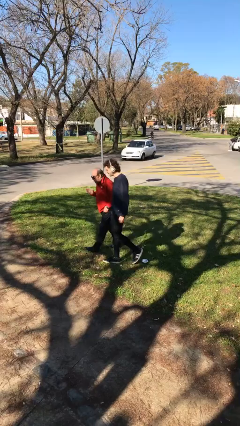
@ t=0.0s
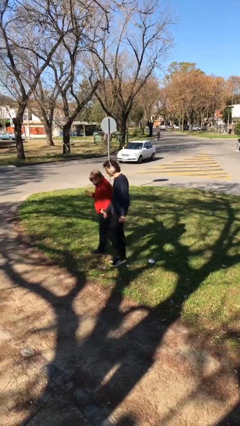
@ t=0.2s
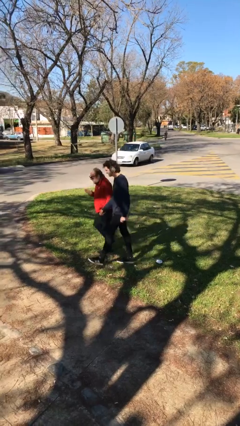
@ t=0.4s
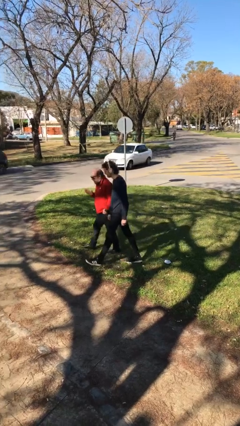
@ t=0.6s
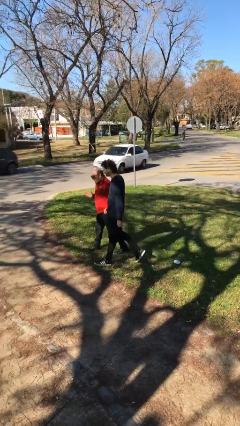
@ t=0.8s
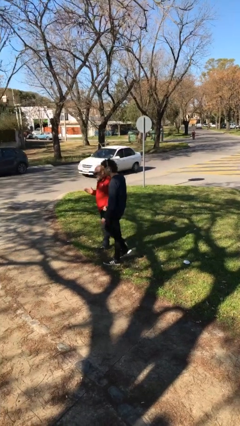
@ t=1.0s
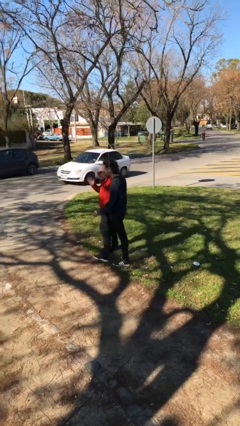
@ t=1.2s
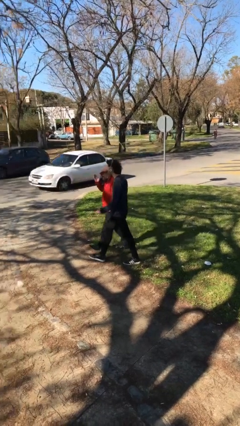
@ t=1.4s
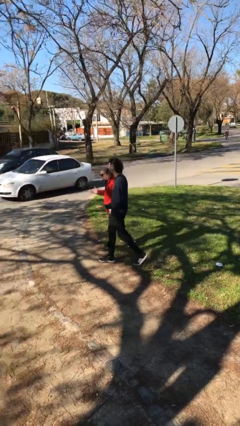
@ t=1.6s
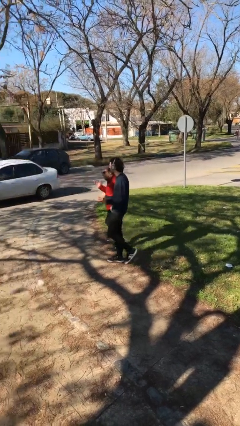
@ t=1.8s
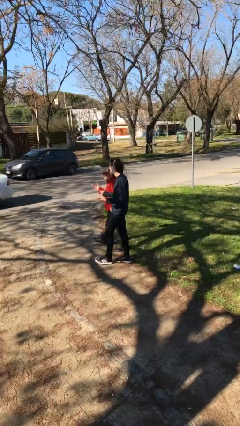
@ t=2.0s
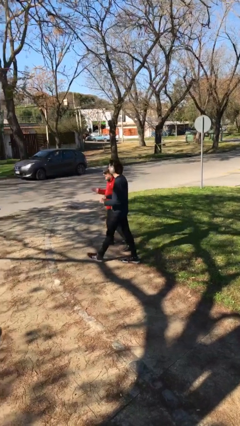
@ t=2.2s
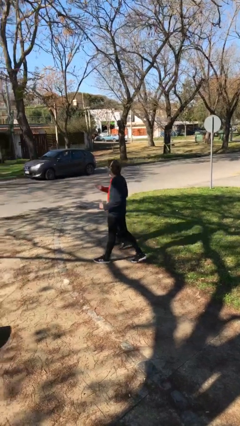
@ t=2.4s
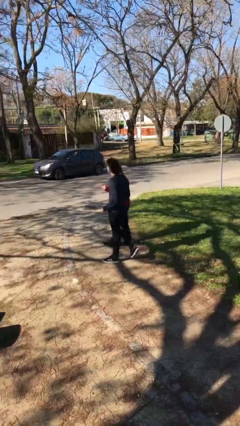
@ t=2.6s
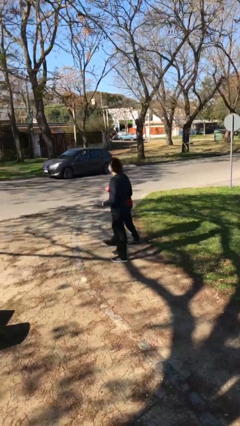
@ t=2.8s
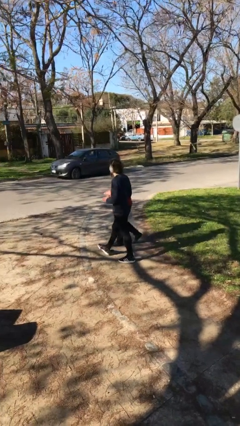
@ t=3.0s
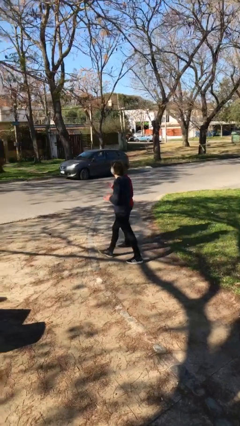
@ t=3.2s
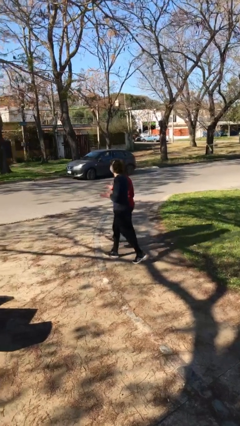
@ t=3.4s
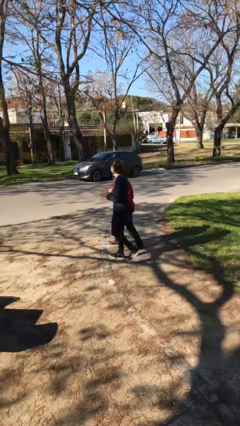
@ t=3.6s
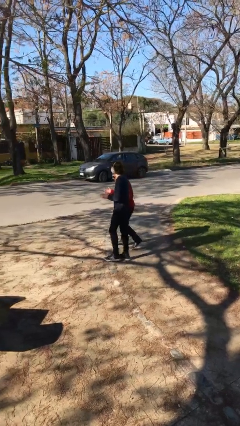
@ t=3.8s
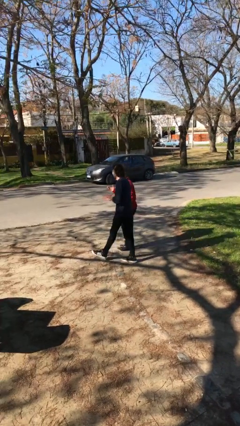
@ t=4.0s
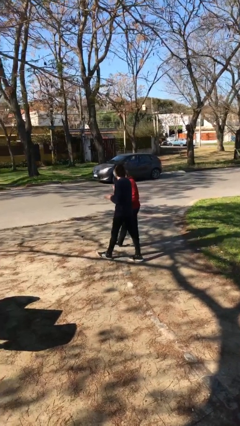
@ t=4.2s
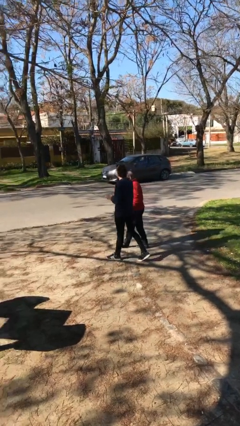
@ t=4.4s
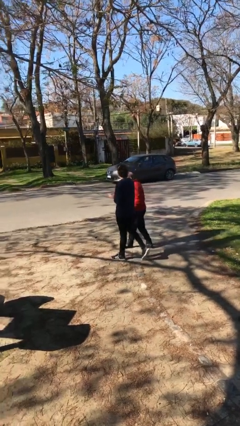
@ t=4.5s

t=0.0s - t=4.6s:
person talks to person

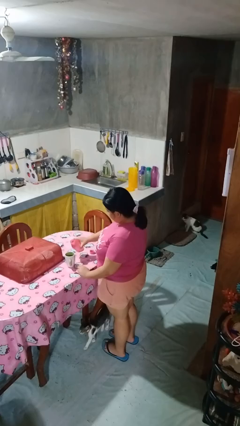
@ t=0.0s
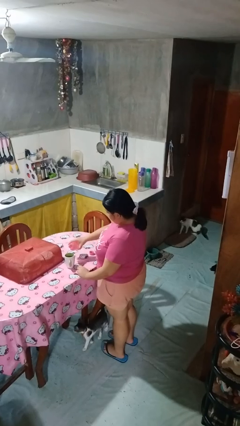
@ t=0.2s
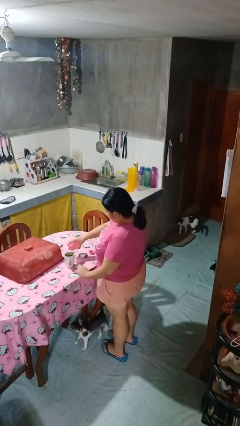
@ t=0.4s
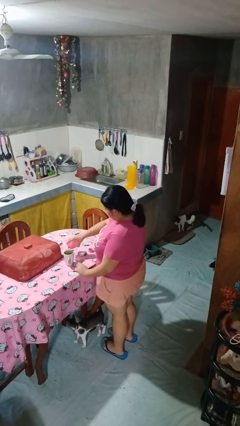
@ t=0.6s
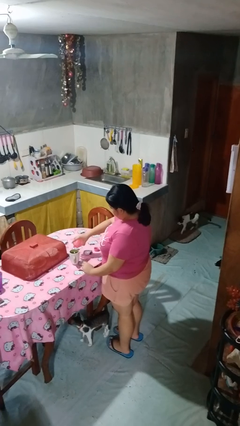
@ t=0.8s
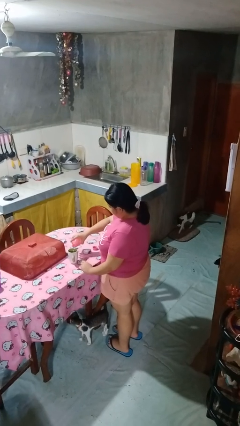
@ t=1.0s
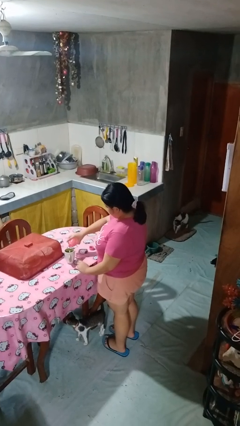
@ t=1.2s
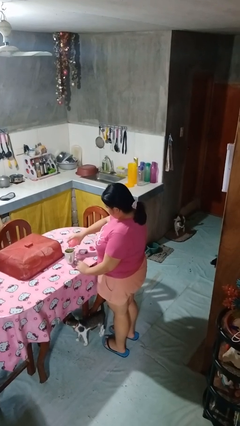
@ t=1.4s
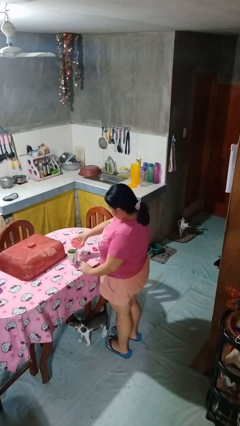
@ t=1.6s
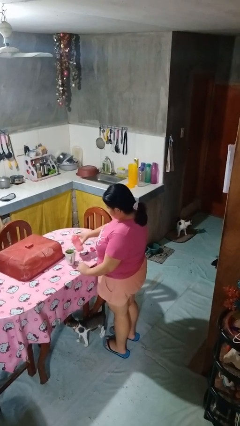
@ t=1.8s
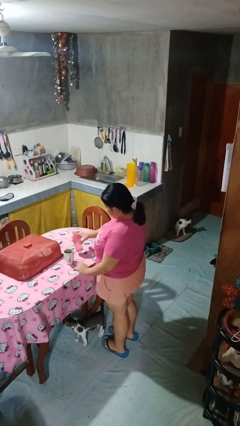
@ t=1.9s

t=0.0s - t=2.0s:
person pours liquid into cup

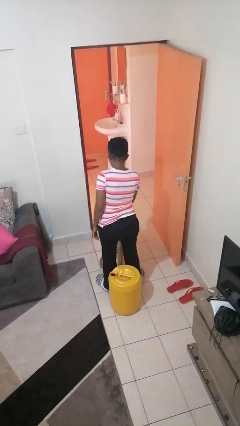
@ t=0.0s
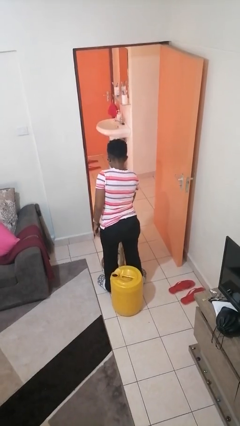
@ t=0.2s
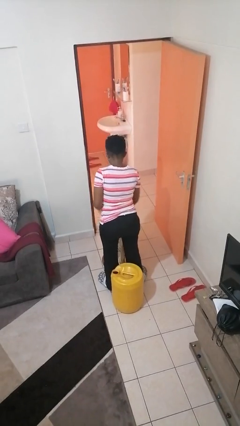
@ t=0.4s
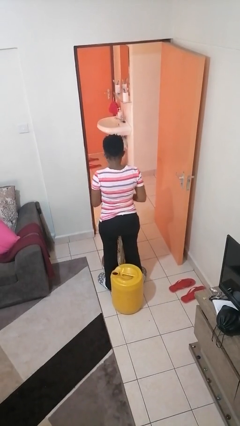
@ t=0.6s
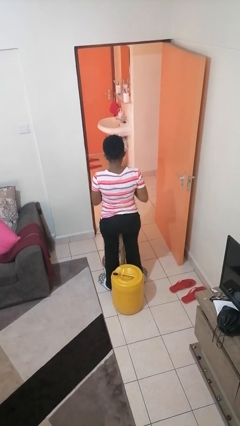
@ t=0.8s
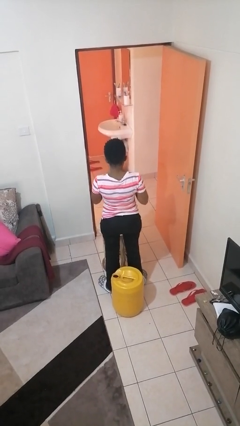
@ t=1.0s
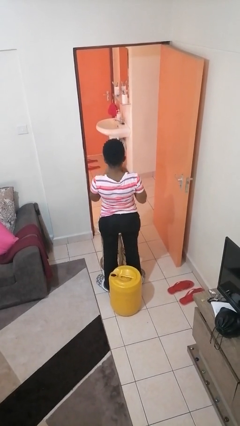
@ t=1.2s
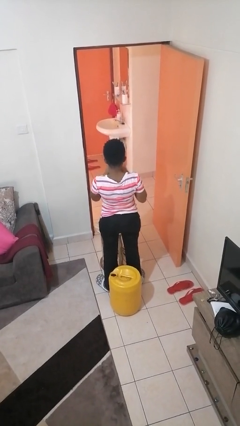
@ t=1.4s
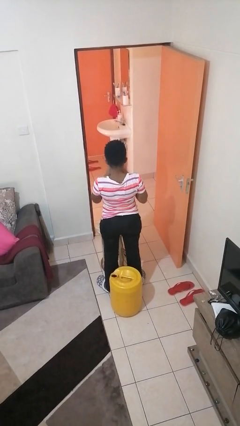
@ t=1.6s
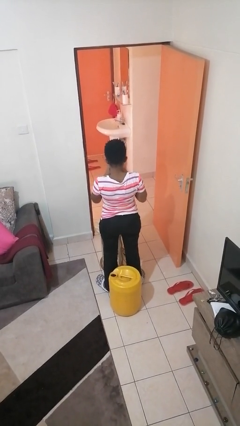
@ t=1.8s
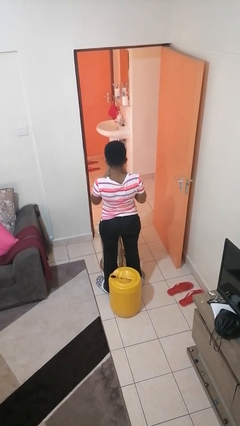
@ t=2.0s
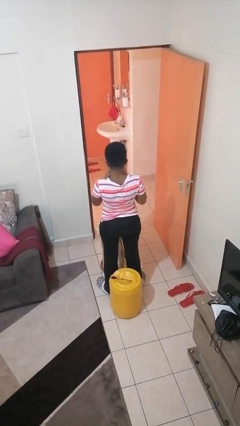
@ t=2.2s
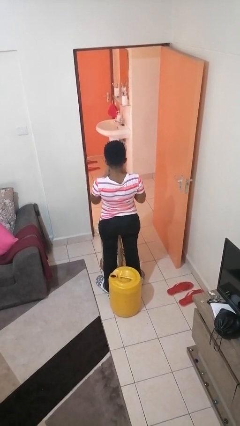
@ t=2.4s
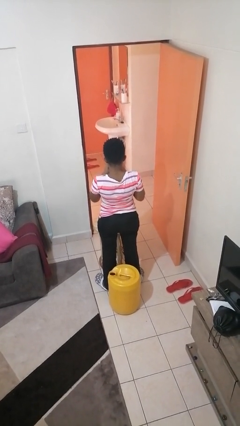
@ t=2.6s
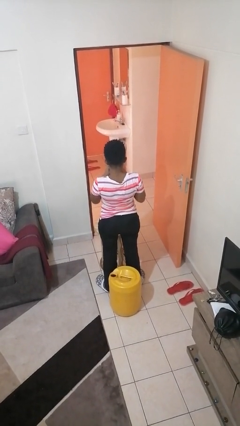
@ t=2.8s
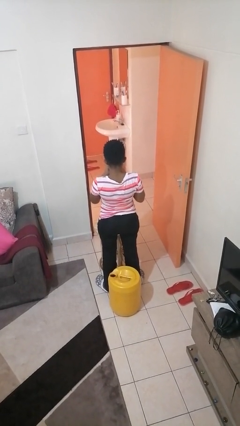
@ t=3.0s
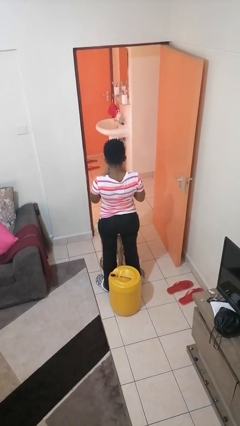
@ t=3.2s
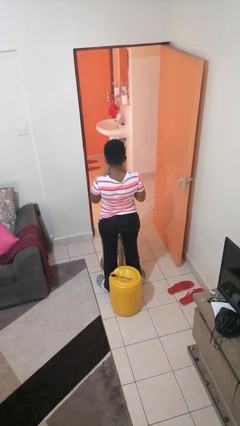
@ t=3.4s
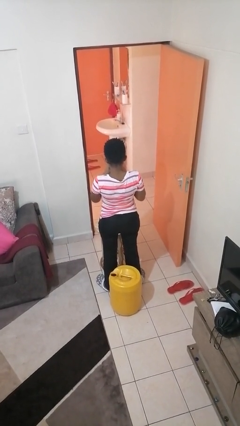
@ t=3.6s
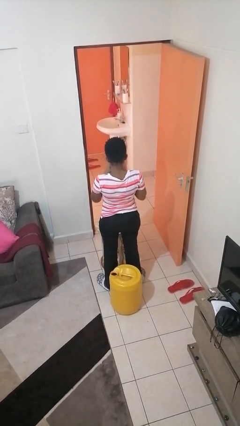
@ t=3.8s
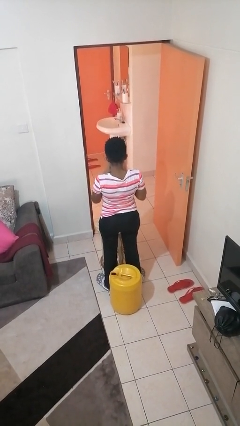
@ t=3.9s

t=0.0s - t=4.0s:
person drinks from straw

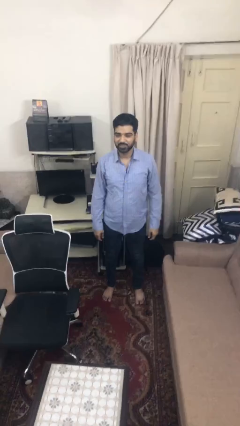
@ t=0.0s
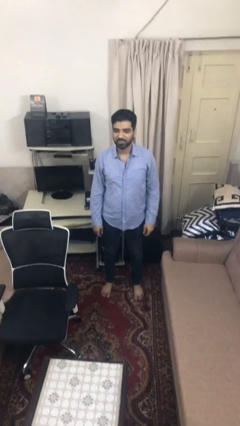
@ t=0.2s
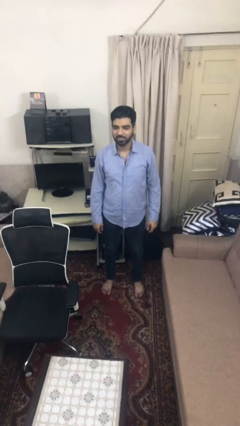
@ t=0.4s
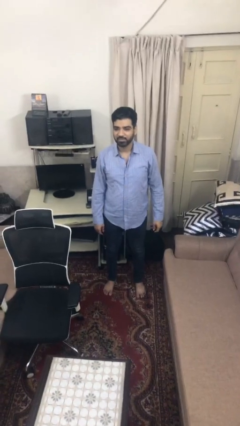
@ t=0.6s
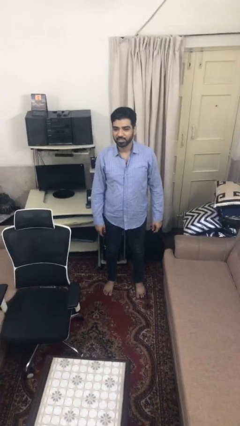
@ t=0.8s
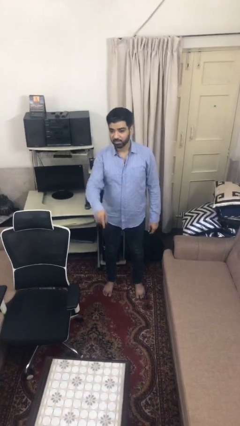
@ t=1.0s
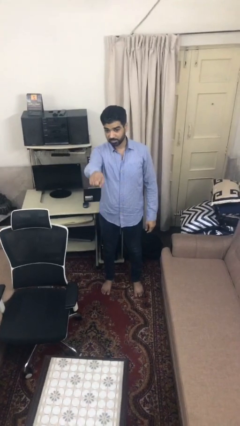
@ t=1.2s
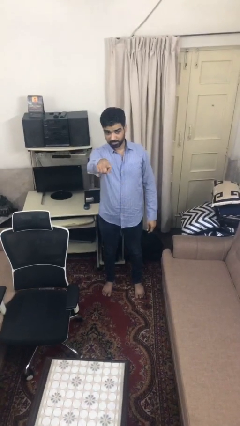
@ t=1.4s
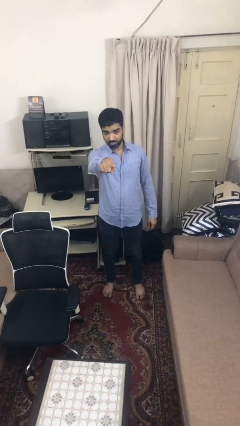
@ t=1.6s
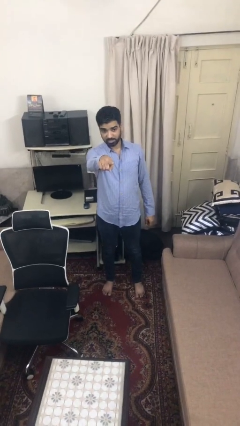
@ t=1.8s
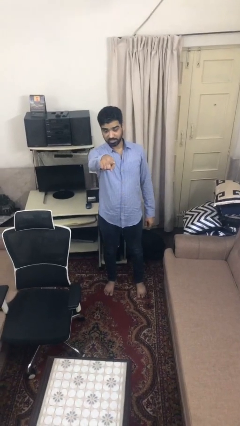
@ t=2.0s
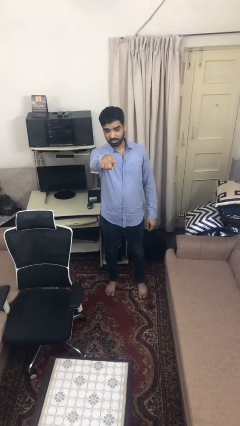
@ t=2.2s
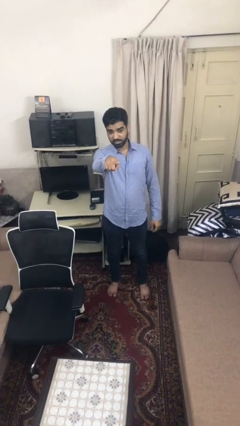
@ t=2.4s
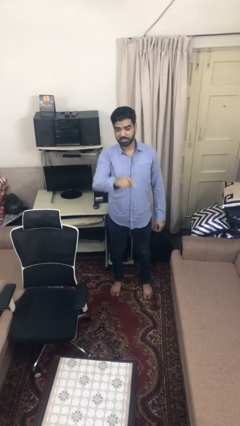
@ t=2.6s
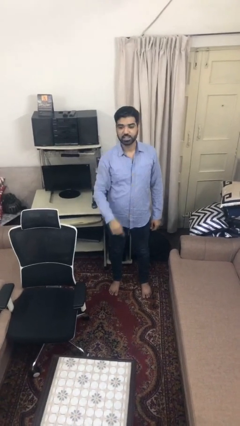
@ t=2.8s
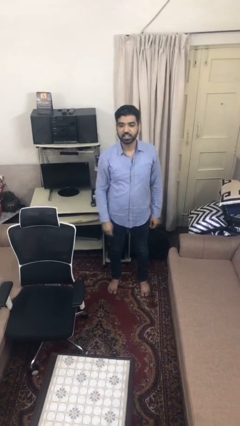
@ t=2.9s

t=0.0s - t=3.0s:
person points at person

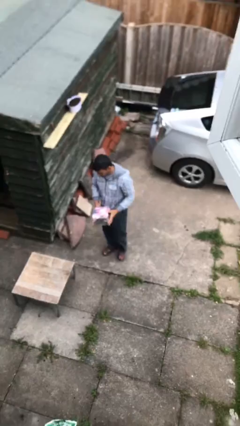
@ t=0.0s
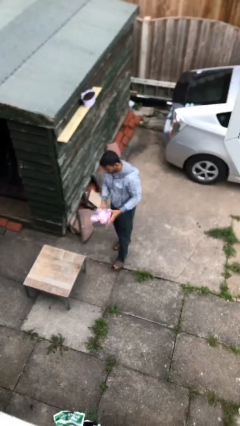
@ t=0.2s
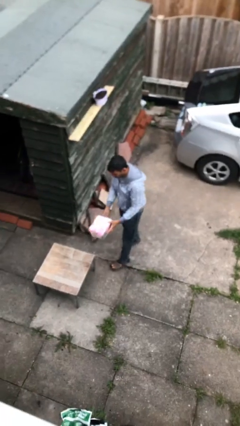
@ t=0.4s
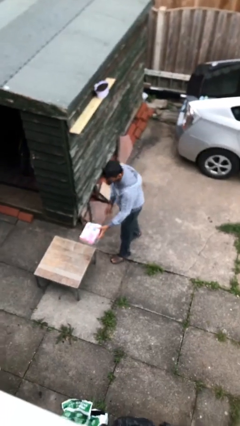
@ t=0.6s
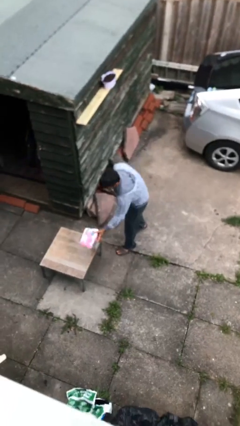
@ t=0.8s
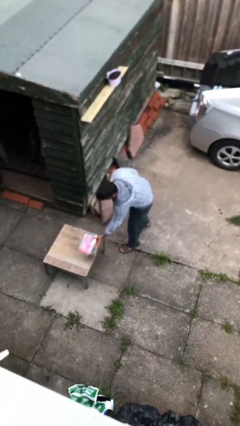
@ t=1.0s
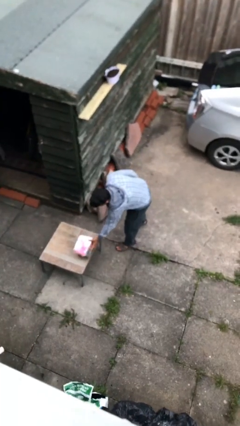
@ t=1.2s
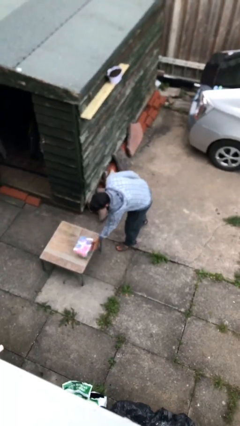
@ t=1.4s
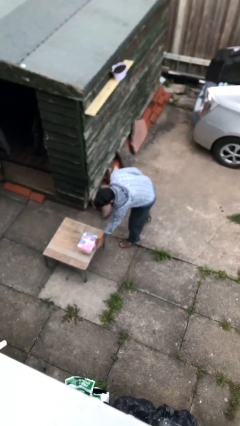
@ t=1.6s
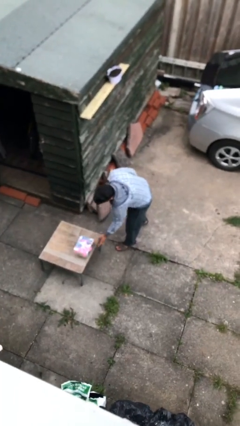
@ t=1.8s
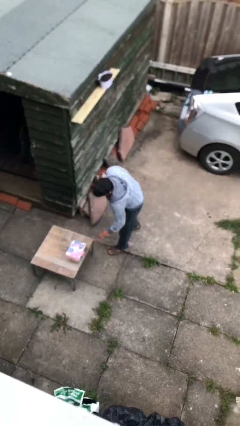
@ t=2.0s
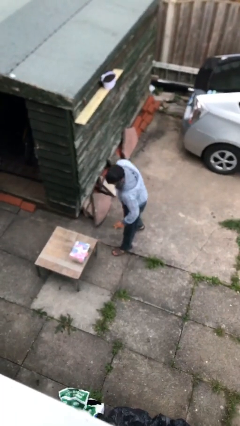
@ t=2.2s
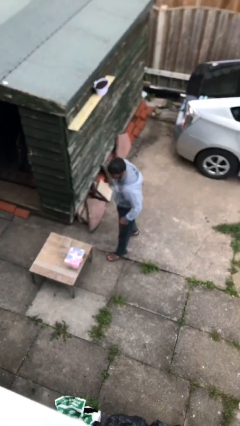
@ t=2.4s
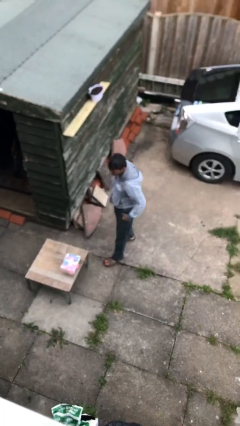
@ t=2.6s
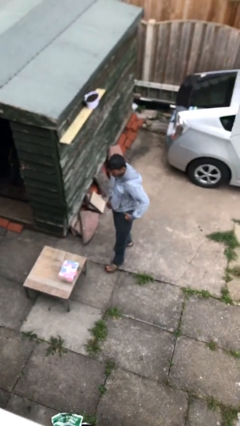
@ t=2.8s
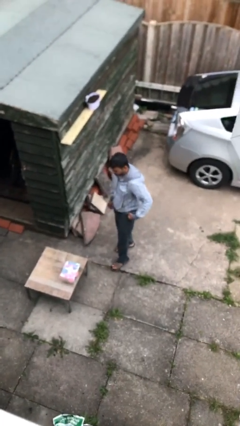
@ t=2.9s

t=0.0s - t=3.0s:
person puts down object on table

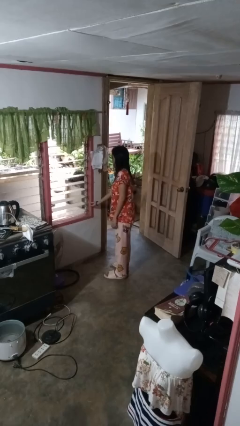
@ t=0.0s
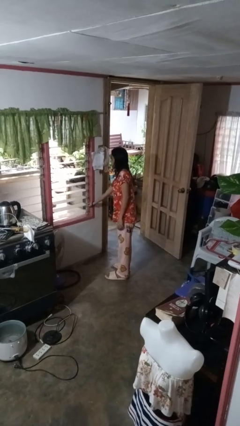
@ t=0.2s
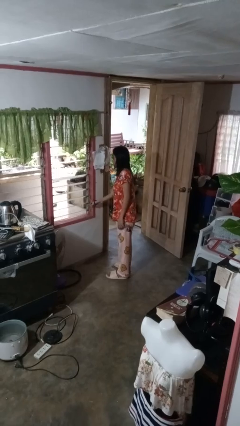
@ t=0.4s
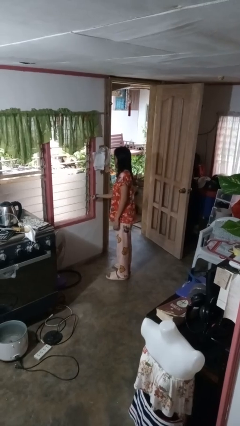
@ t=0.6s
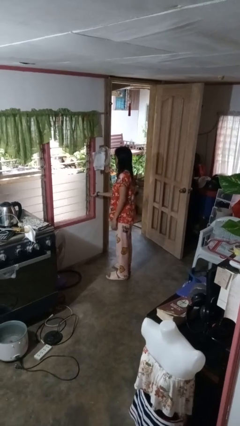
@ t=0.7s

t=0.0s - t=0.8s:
person closes home window
